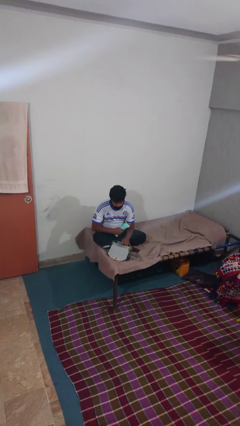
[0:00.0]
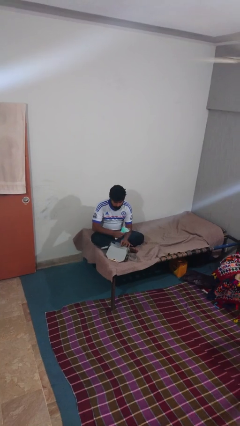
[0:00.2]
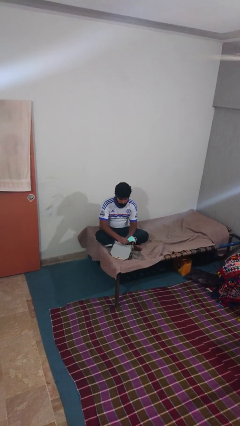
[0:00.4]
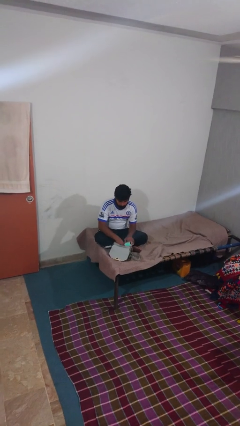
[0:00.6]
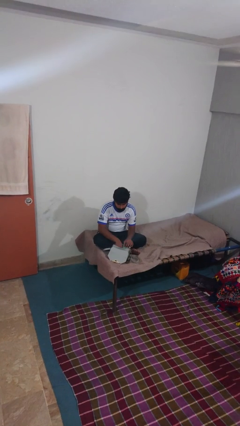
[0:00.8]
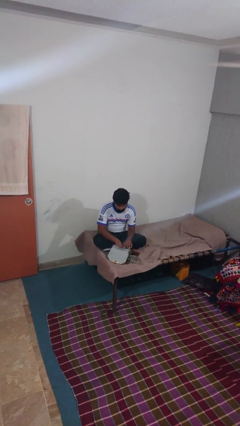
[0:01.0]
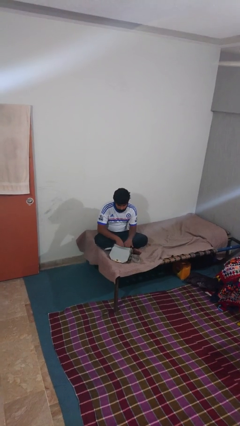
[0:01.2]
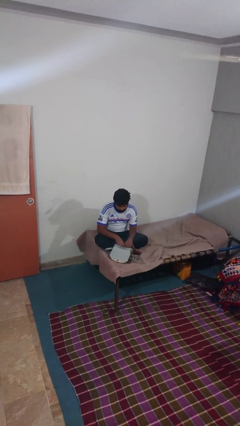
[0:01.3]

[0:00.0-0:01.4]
person puts object into purse

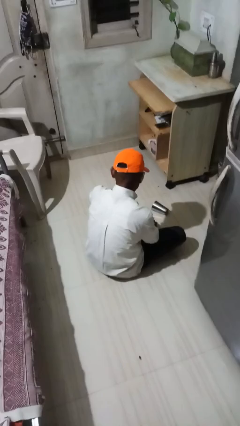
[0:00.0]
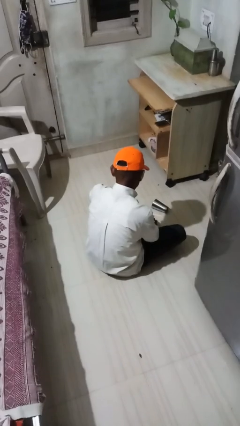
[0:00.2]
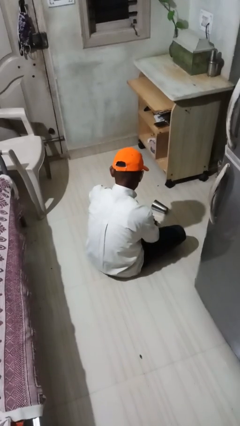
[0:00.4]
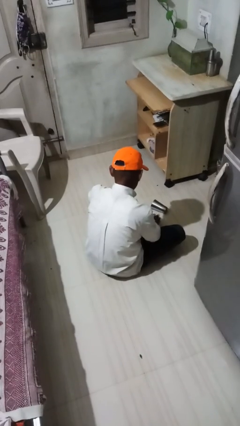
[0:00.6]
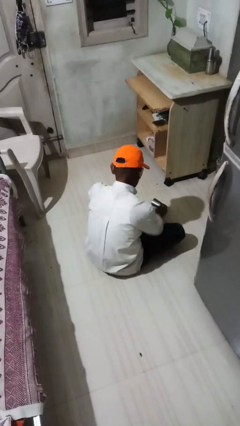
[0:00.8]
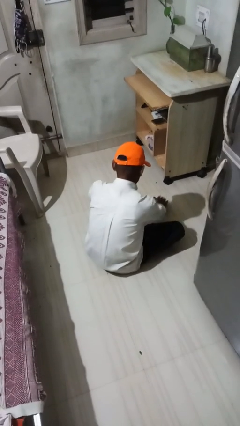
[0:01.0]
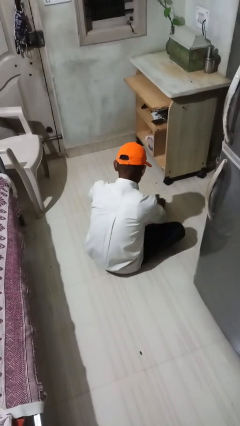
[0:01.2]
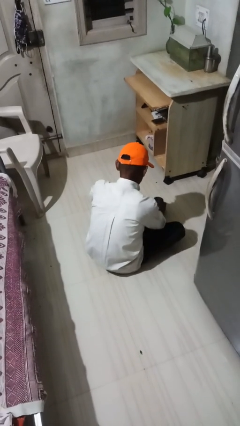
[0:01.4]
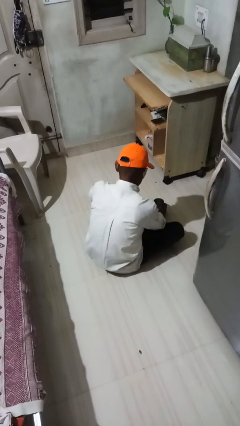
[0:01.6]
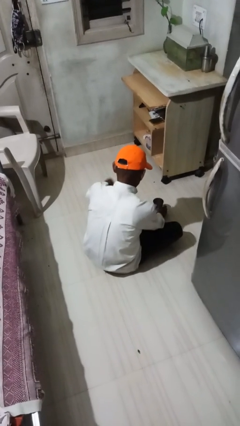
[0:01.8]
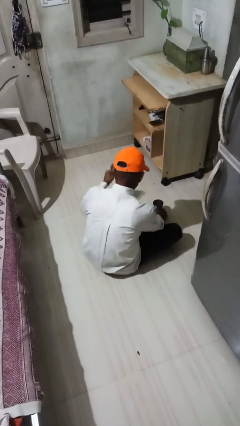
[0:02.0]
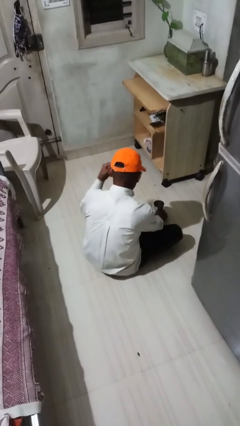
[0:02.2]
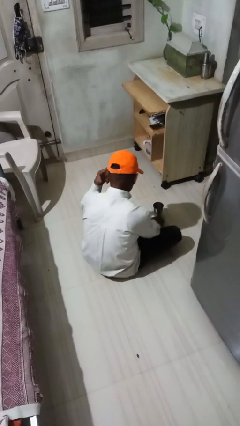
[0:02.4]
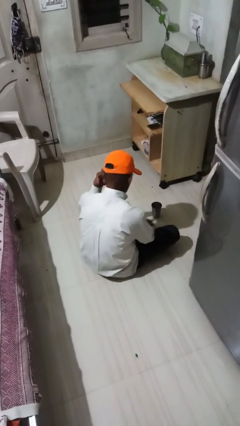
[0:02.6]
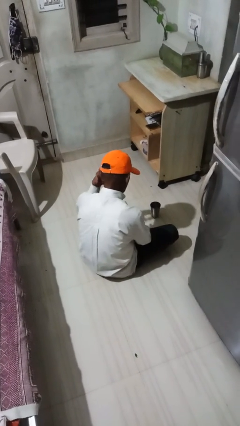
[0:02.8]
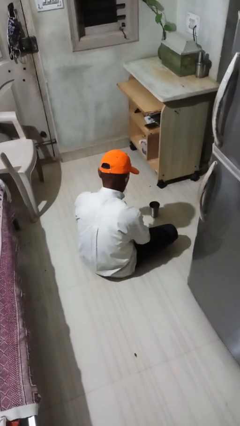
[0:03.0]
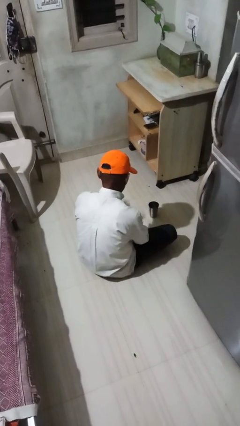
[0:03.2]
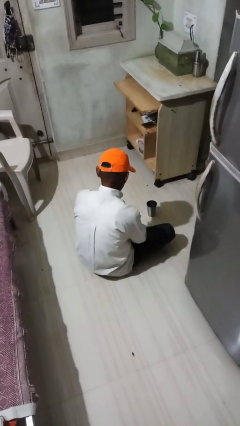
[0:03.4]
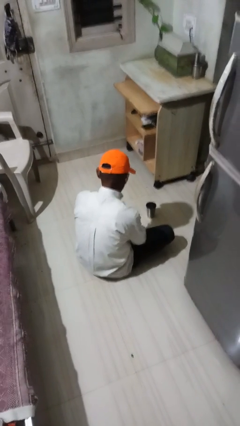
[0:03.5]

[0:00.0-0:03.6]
person sets upright glass

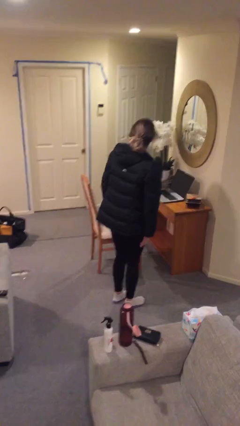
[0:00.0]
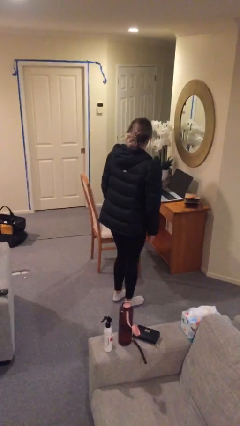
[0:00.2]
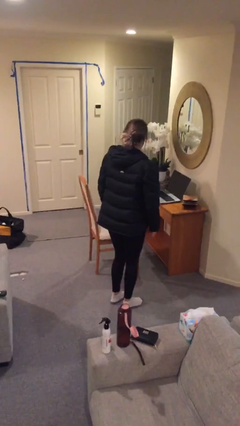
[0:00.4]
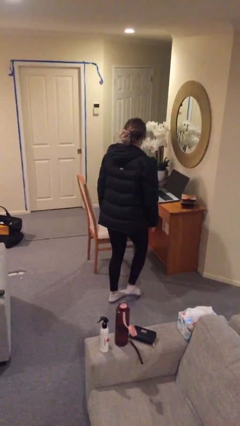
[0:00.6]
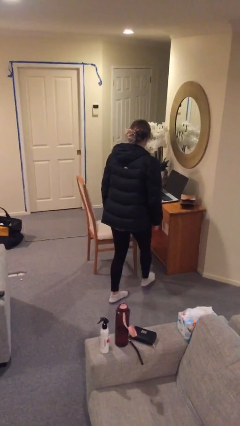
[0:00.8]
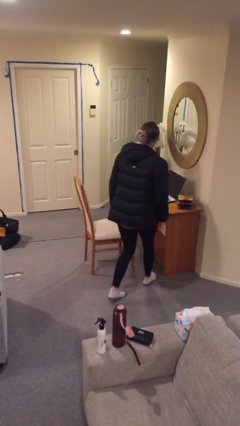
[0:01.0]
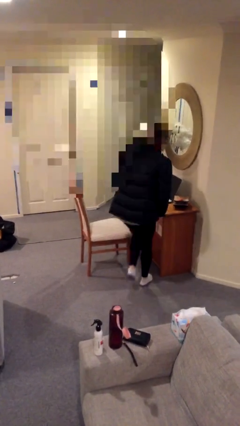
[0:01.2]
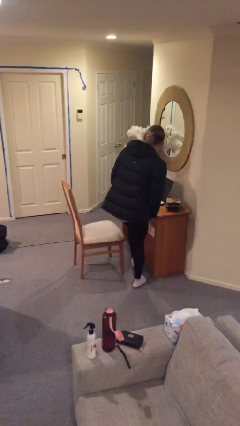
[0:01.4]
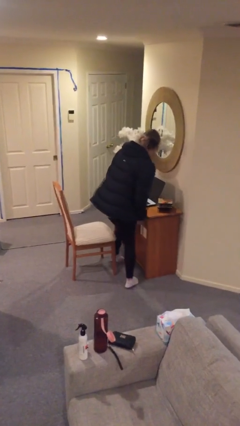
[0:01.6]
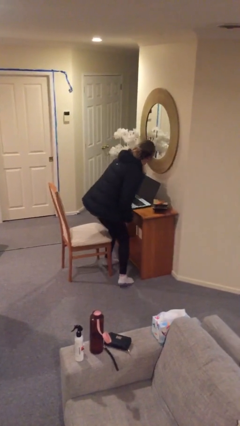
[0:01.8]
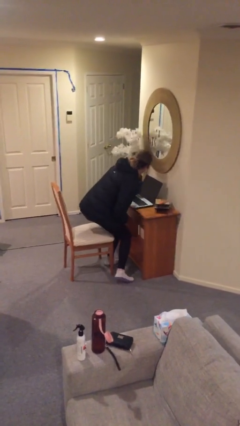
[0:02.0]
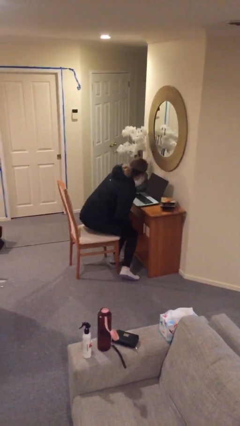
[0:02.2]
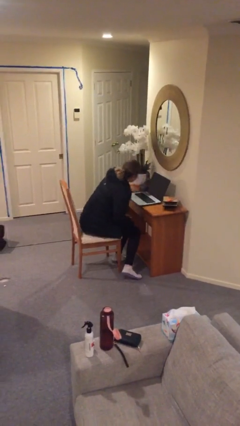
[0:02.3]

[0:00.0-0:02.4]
person sits down

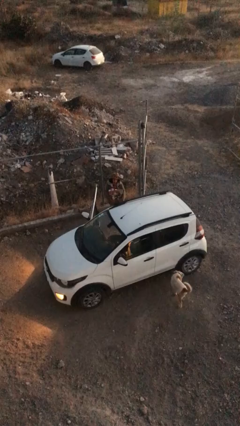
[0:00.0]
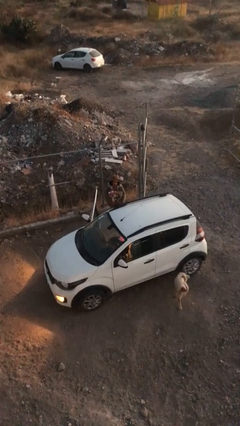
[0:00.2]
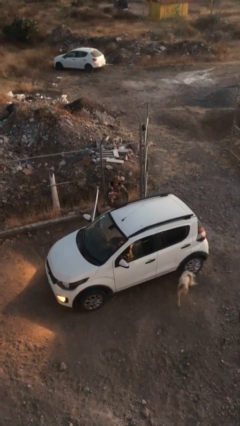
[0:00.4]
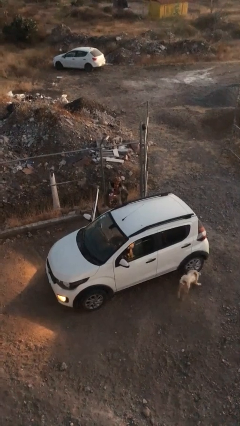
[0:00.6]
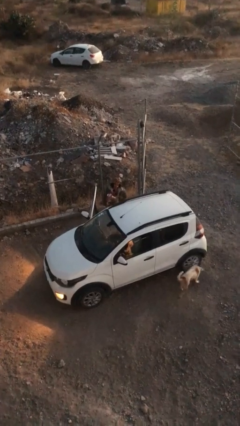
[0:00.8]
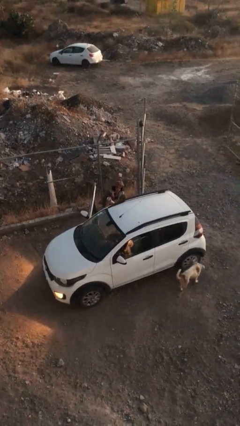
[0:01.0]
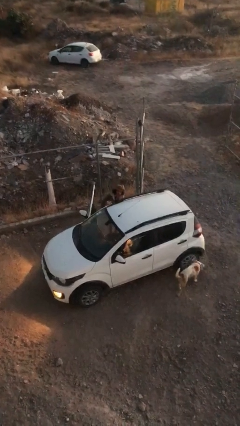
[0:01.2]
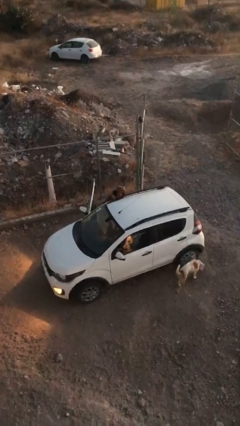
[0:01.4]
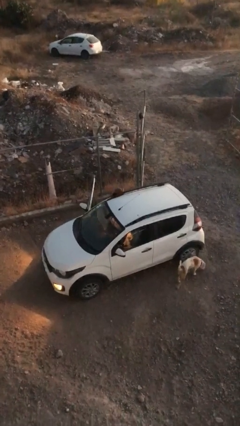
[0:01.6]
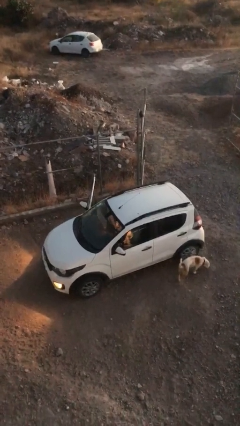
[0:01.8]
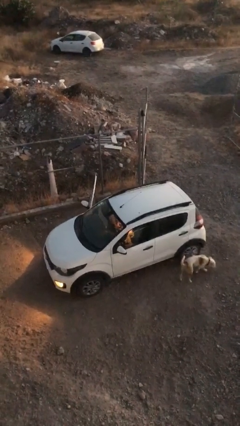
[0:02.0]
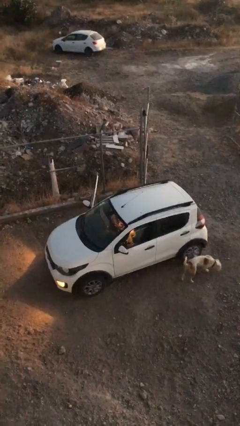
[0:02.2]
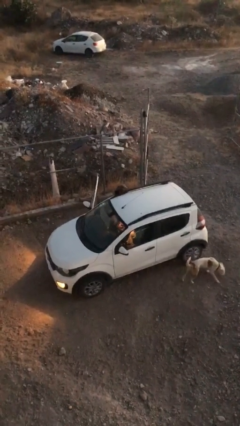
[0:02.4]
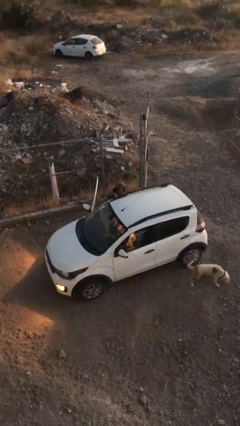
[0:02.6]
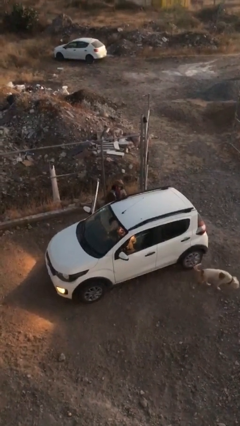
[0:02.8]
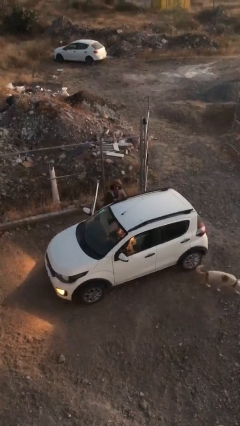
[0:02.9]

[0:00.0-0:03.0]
person loads car

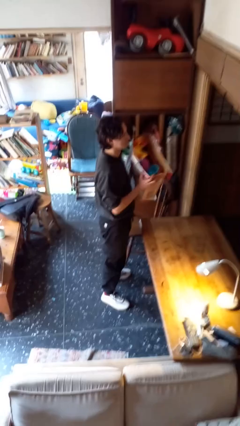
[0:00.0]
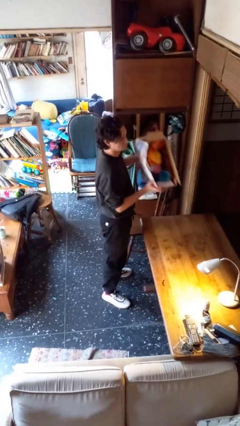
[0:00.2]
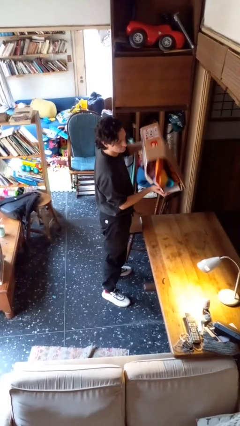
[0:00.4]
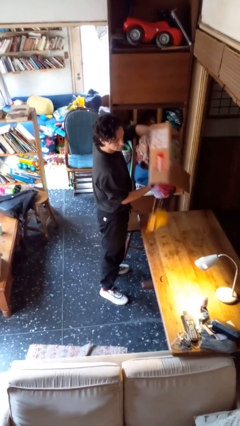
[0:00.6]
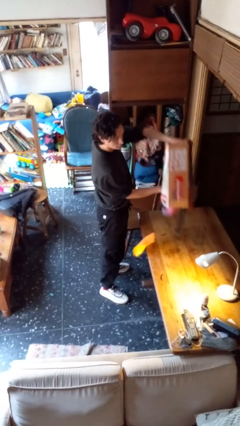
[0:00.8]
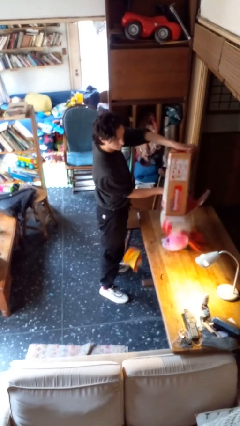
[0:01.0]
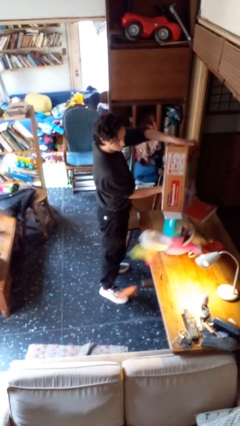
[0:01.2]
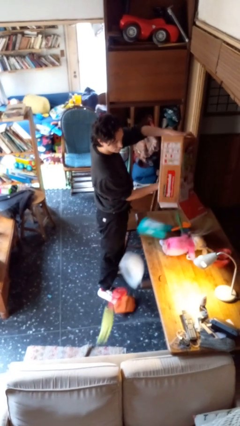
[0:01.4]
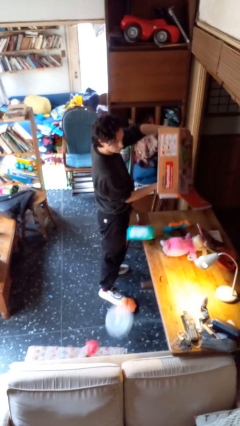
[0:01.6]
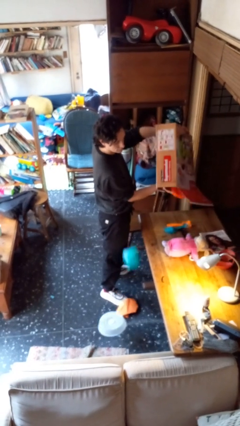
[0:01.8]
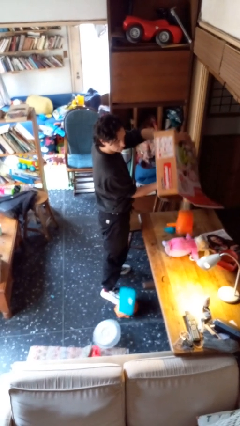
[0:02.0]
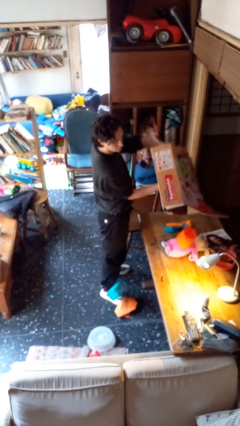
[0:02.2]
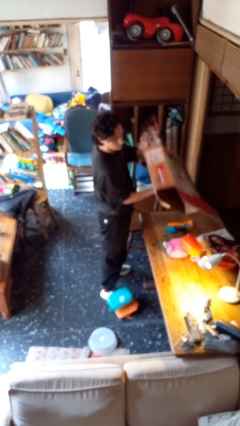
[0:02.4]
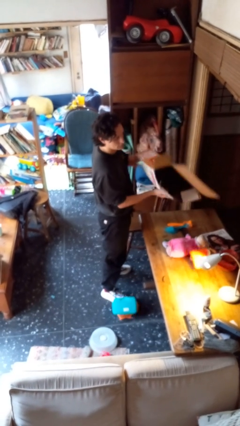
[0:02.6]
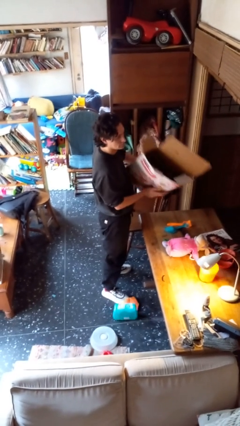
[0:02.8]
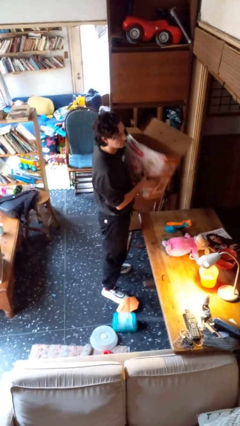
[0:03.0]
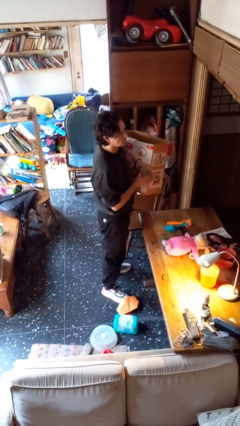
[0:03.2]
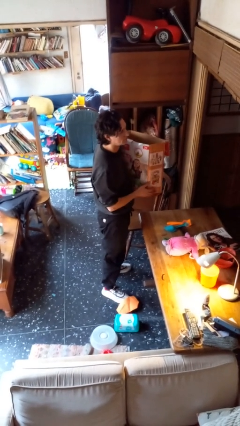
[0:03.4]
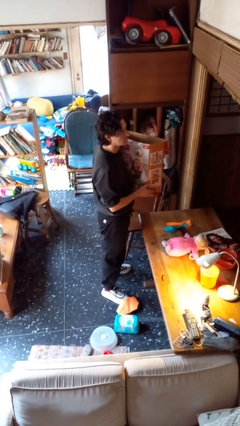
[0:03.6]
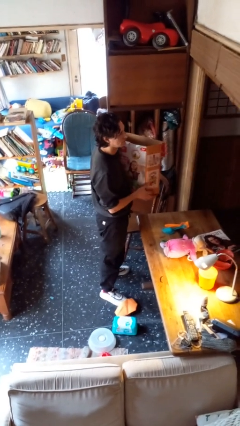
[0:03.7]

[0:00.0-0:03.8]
person unloads box onto table

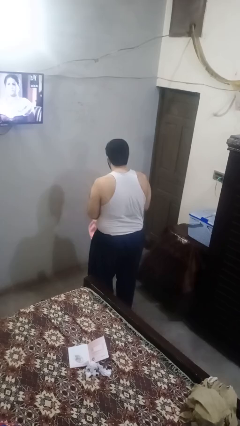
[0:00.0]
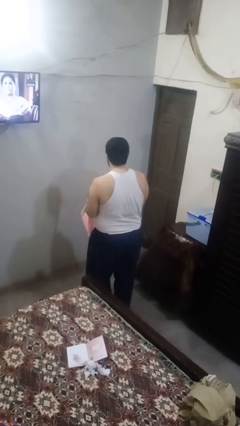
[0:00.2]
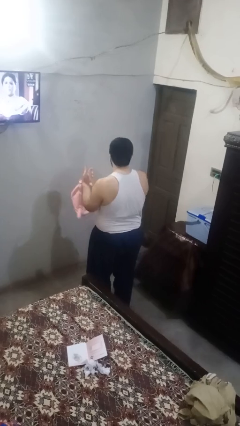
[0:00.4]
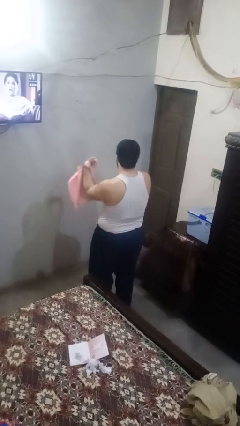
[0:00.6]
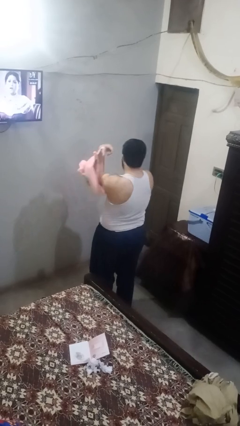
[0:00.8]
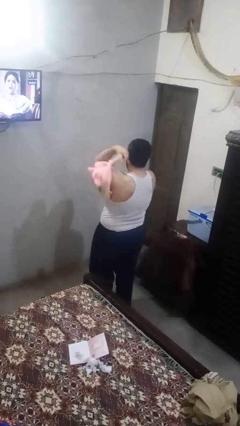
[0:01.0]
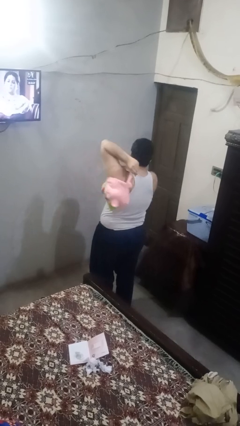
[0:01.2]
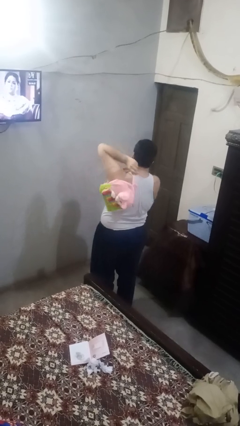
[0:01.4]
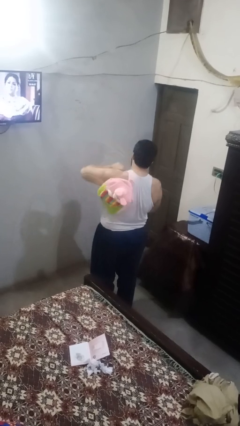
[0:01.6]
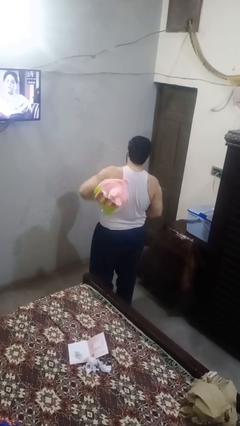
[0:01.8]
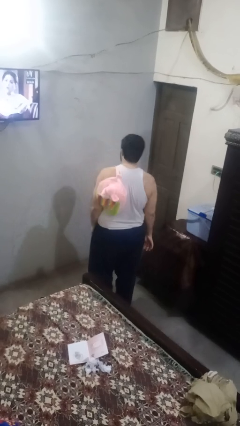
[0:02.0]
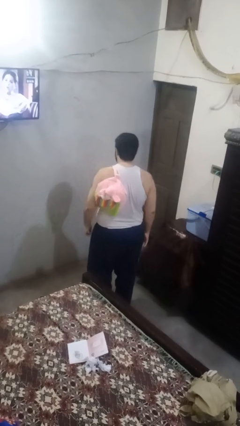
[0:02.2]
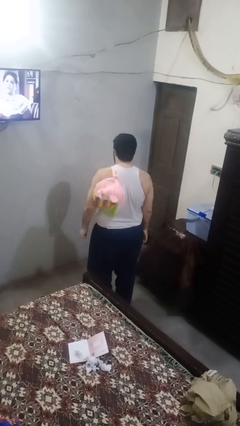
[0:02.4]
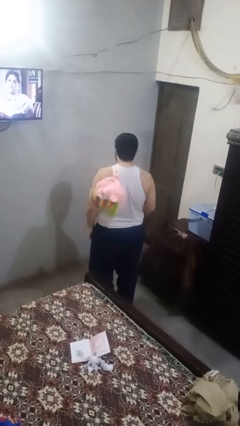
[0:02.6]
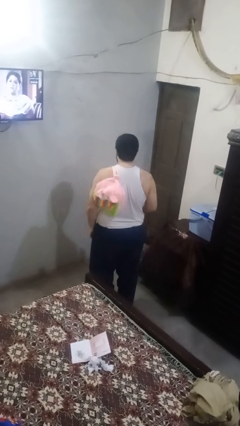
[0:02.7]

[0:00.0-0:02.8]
person puts on backpack

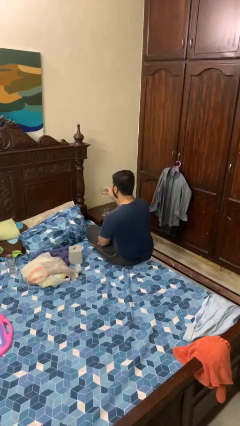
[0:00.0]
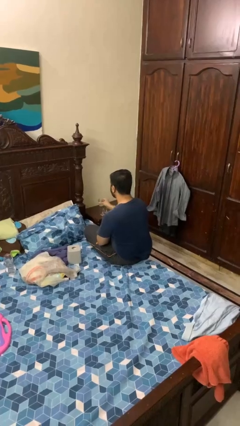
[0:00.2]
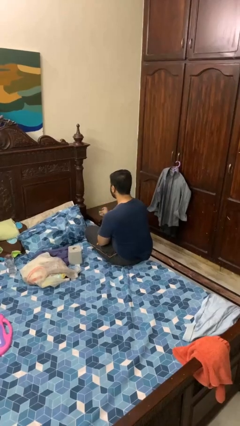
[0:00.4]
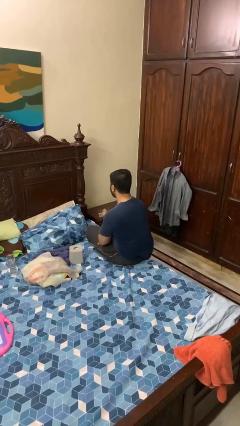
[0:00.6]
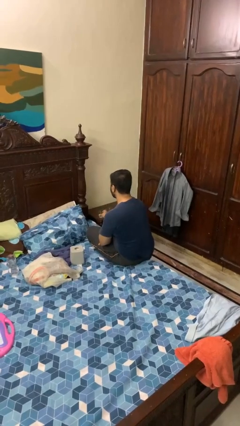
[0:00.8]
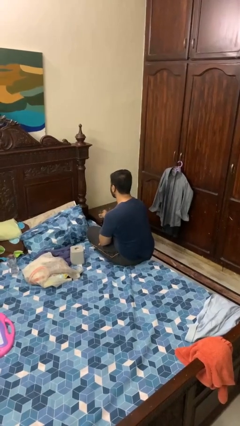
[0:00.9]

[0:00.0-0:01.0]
person puts down object on table
